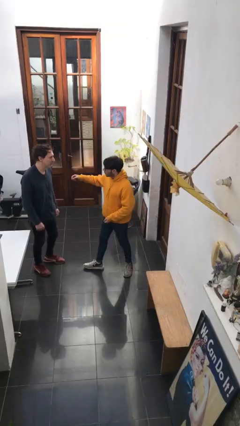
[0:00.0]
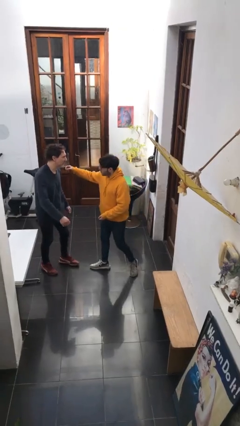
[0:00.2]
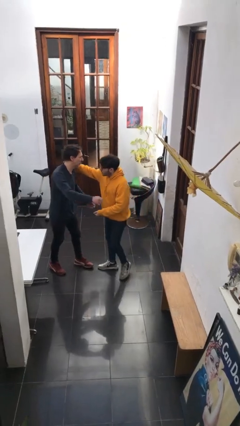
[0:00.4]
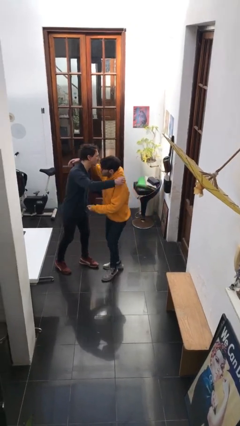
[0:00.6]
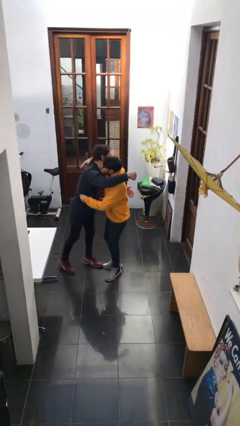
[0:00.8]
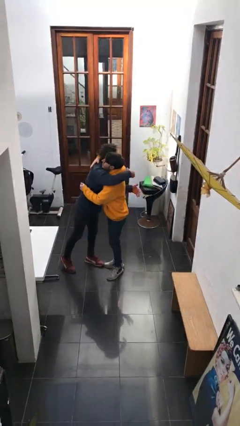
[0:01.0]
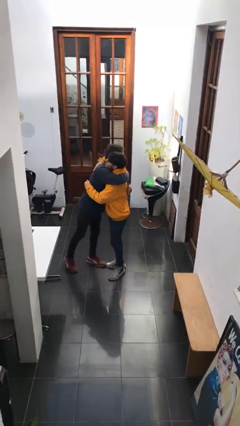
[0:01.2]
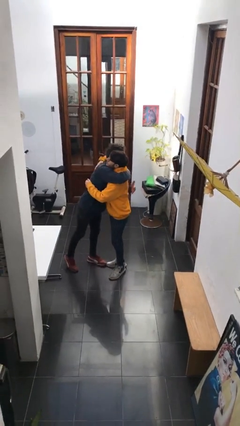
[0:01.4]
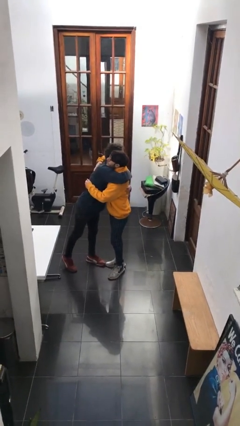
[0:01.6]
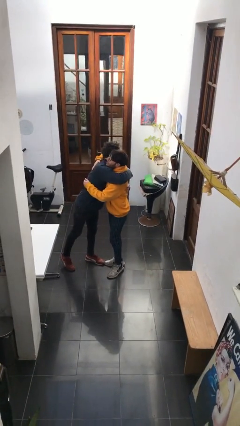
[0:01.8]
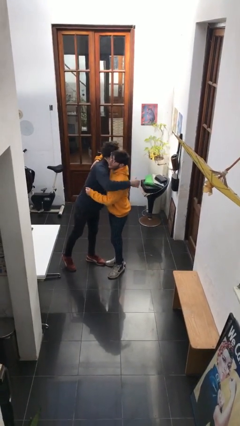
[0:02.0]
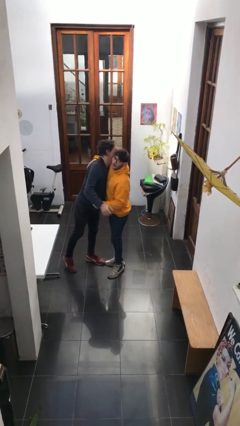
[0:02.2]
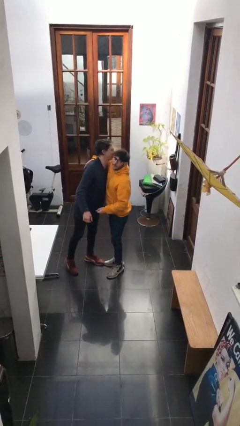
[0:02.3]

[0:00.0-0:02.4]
person embraces person

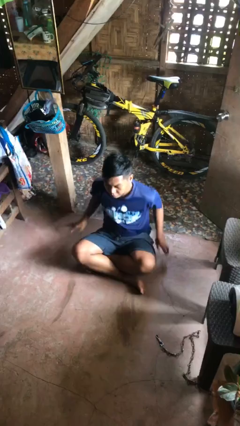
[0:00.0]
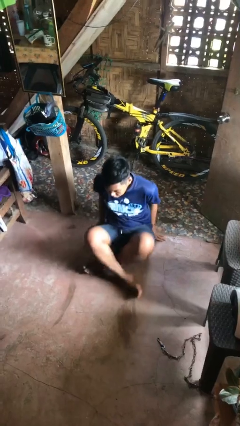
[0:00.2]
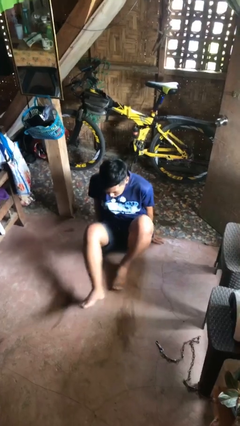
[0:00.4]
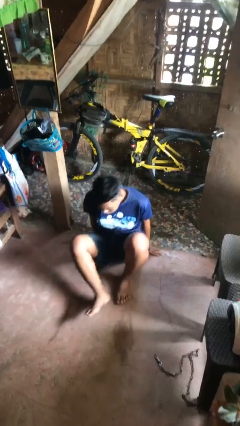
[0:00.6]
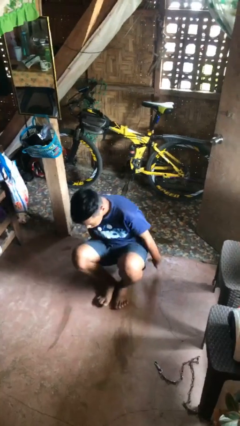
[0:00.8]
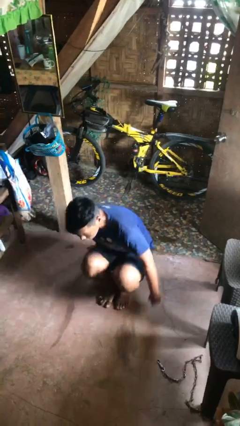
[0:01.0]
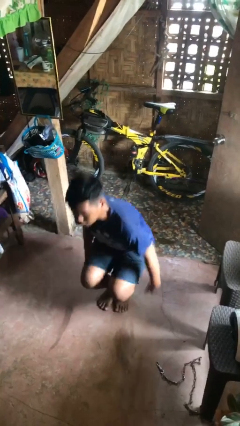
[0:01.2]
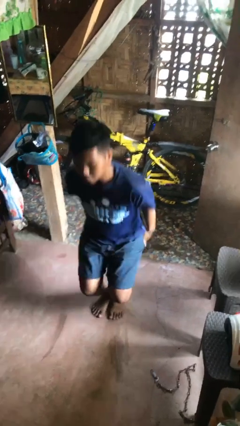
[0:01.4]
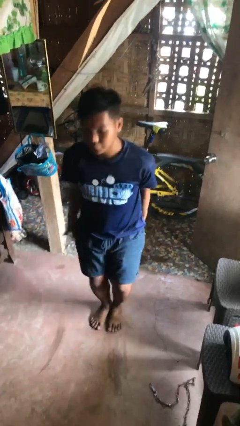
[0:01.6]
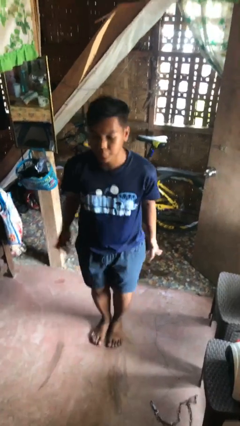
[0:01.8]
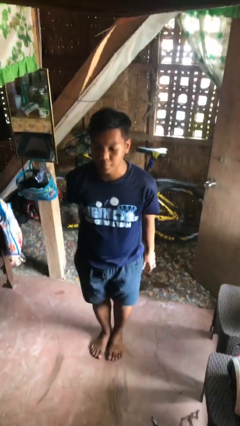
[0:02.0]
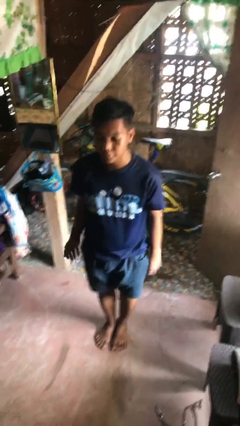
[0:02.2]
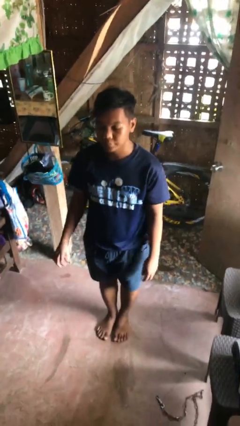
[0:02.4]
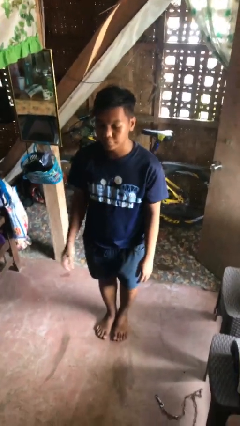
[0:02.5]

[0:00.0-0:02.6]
person stands up from floor

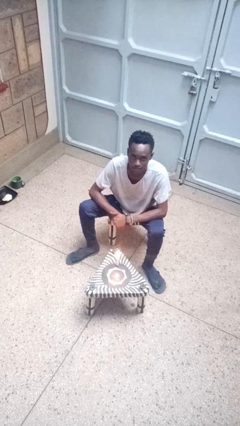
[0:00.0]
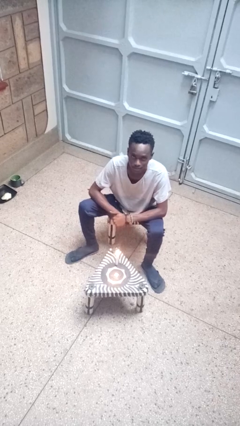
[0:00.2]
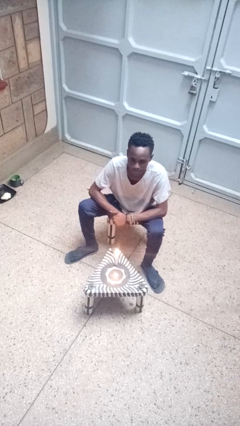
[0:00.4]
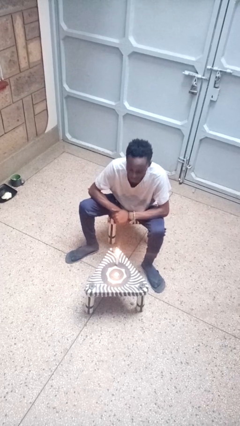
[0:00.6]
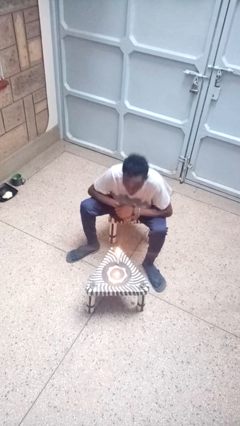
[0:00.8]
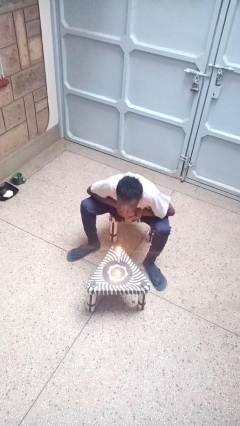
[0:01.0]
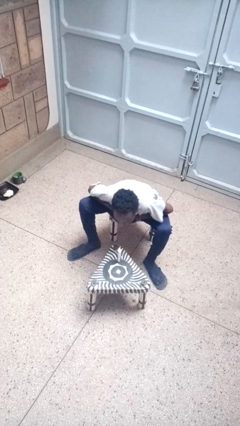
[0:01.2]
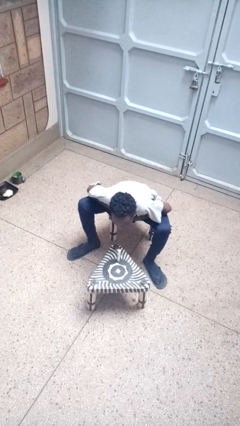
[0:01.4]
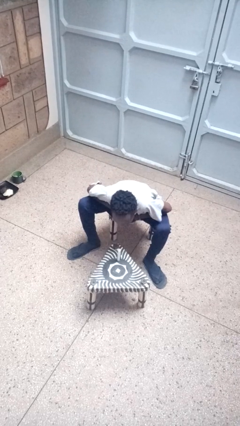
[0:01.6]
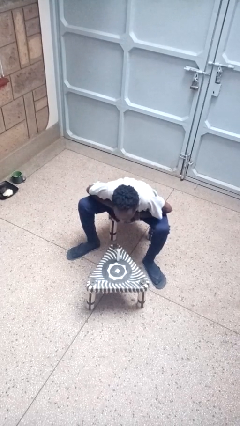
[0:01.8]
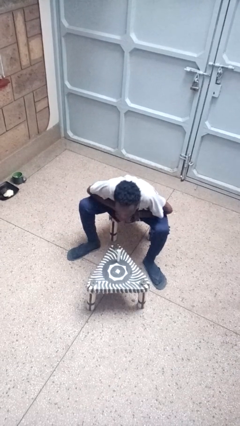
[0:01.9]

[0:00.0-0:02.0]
person extinguishes candle

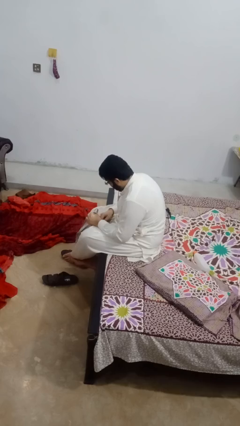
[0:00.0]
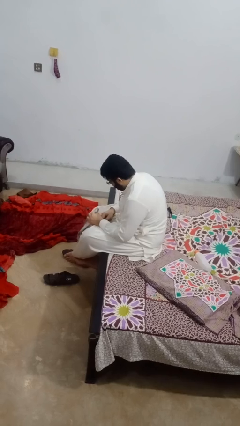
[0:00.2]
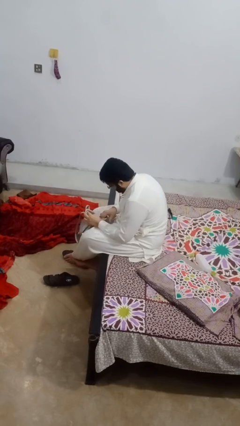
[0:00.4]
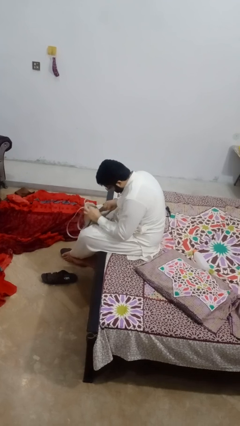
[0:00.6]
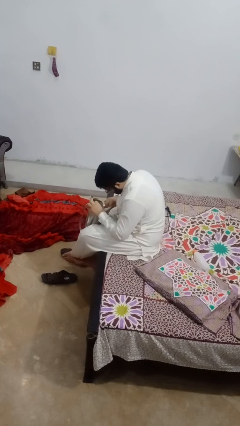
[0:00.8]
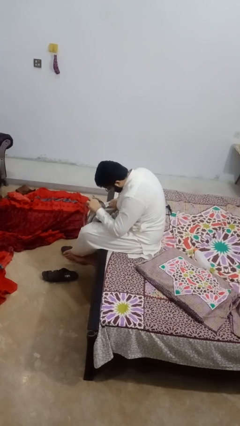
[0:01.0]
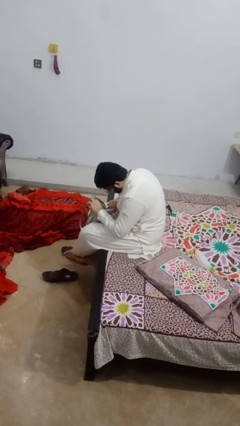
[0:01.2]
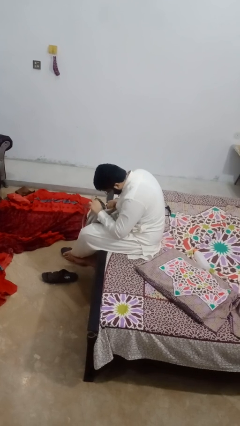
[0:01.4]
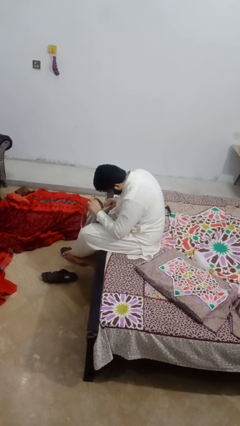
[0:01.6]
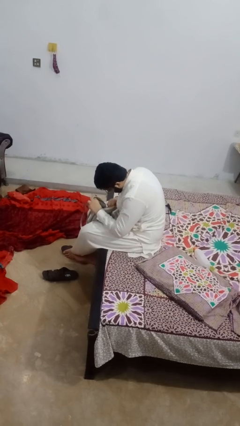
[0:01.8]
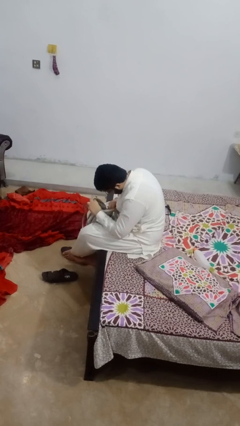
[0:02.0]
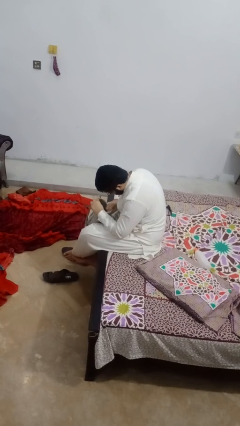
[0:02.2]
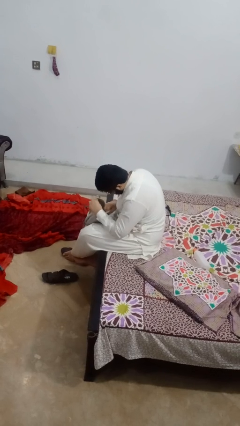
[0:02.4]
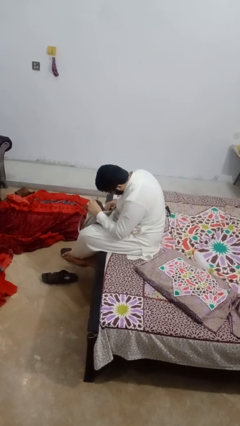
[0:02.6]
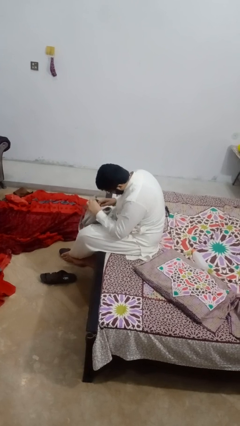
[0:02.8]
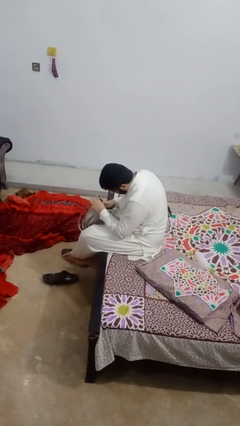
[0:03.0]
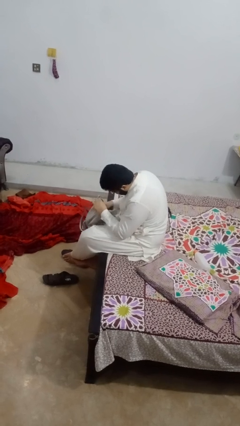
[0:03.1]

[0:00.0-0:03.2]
person searches in purse

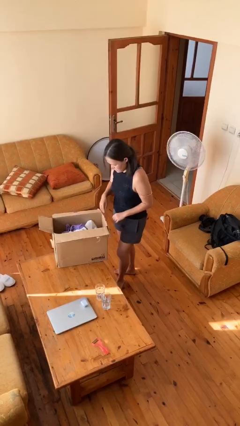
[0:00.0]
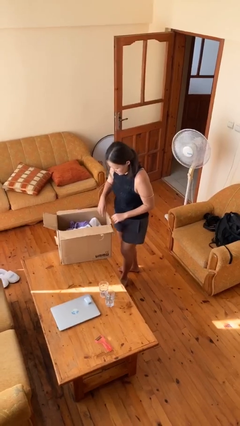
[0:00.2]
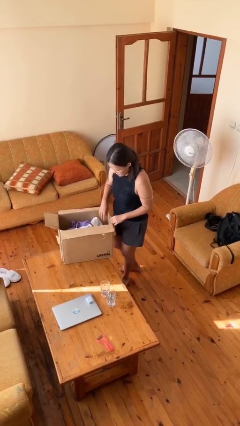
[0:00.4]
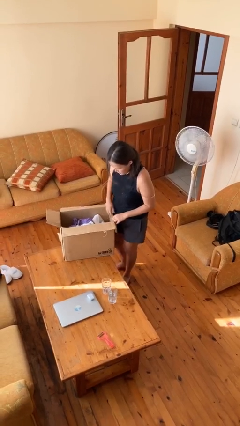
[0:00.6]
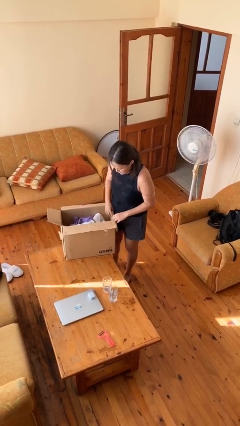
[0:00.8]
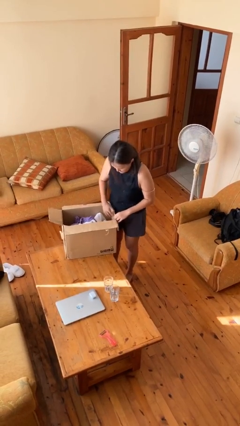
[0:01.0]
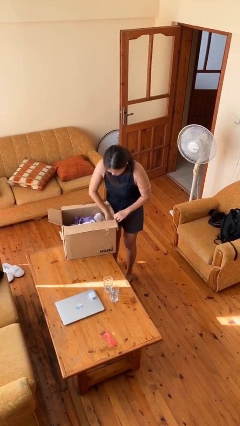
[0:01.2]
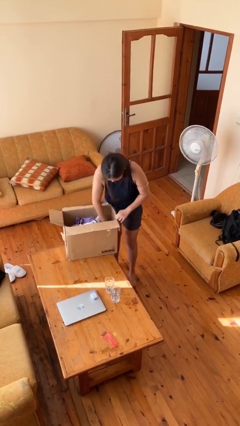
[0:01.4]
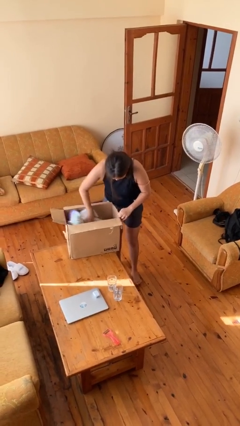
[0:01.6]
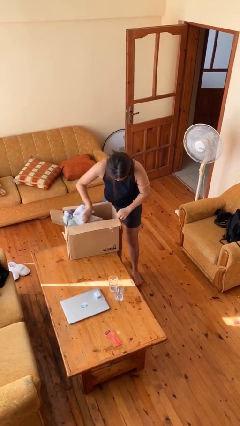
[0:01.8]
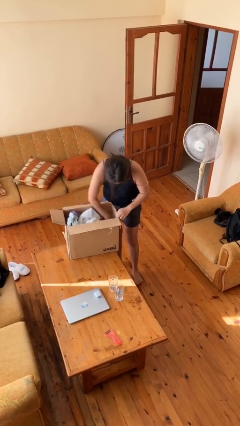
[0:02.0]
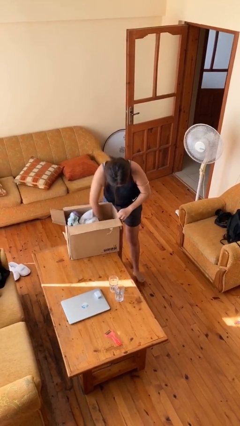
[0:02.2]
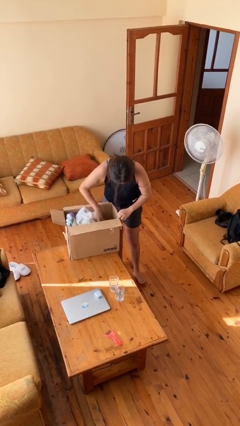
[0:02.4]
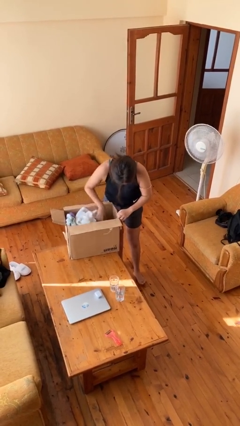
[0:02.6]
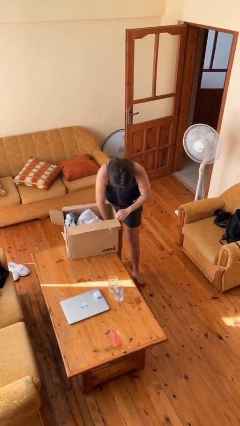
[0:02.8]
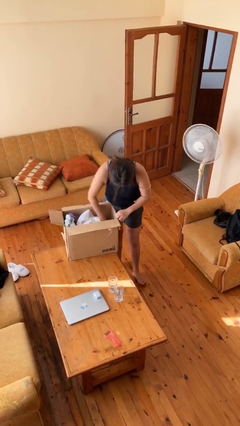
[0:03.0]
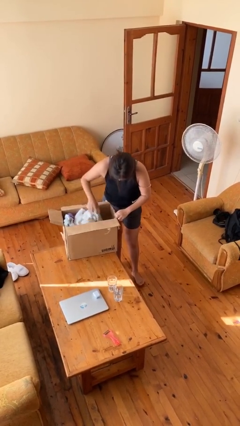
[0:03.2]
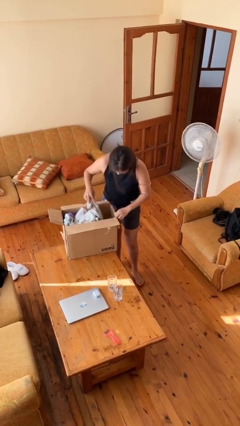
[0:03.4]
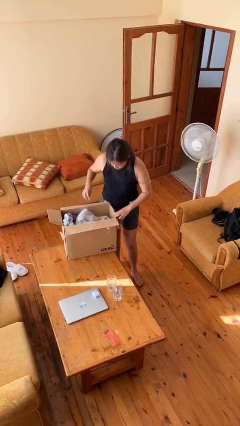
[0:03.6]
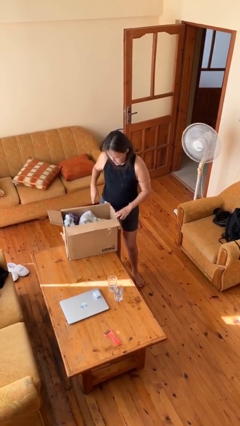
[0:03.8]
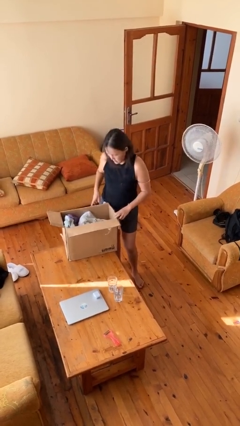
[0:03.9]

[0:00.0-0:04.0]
person searches in box

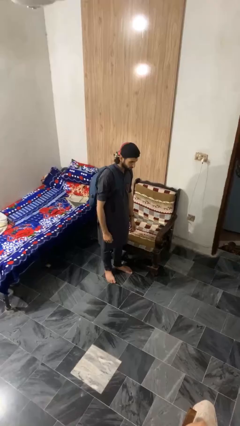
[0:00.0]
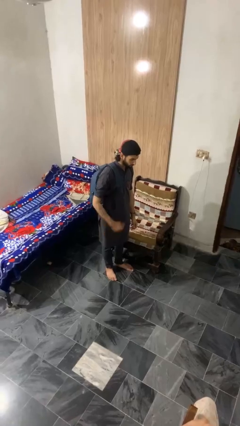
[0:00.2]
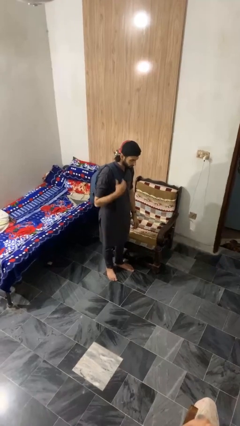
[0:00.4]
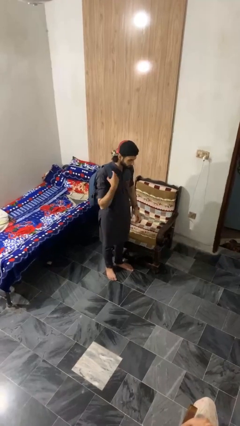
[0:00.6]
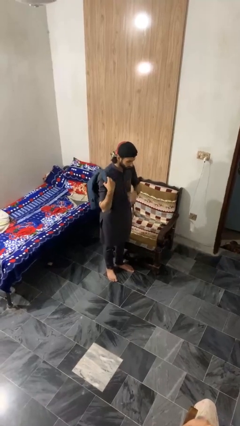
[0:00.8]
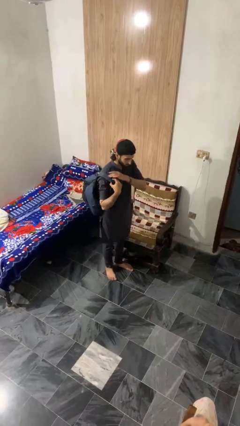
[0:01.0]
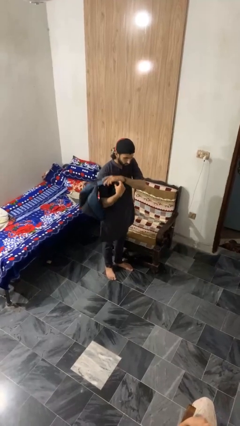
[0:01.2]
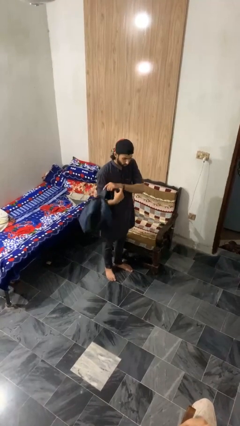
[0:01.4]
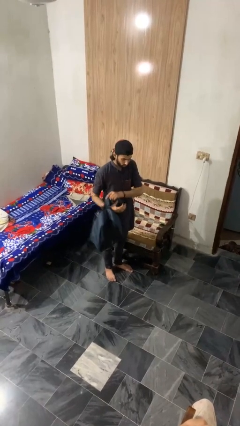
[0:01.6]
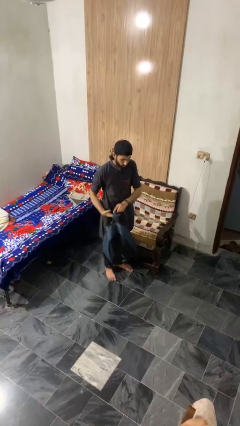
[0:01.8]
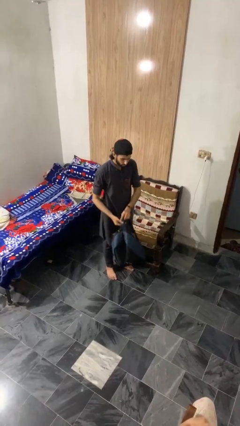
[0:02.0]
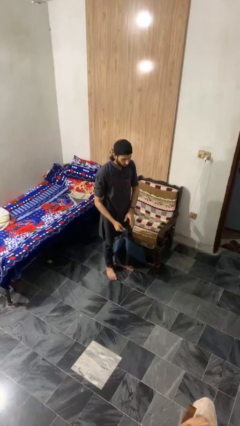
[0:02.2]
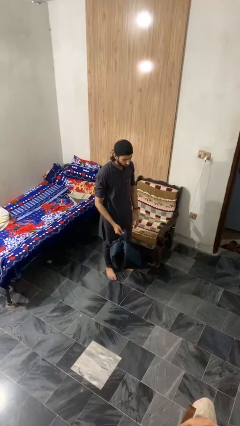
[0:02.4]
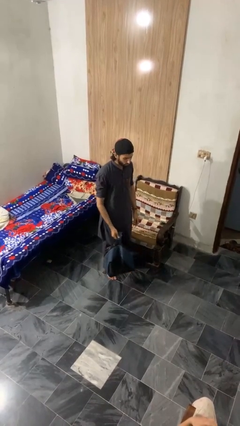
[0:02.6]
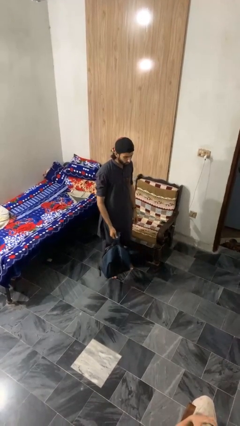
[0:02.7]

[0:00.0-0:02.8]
person takes off backpack
